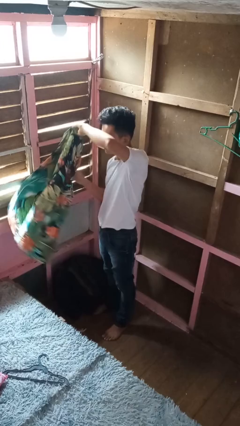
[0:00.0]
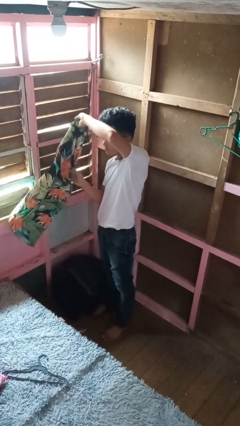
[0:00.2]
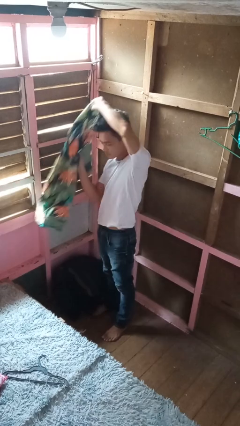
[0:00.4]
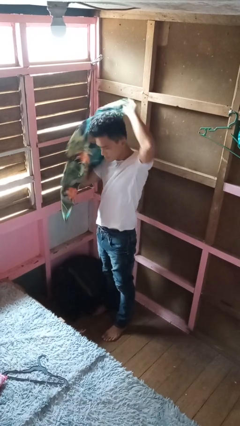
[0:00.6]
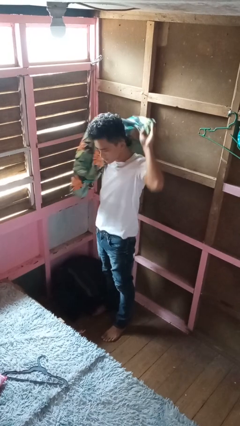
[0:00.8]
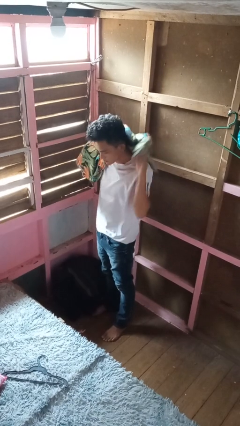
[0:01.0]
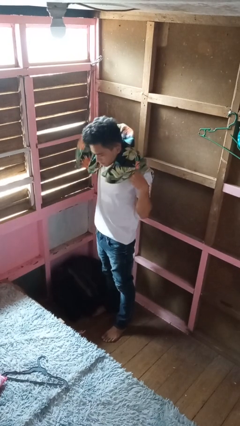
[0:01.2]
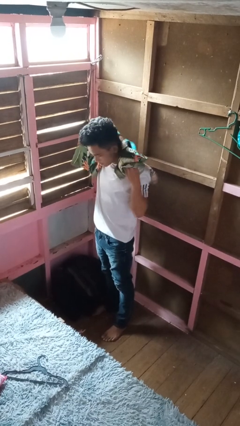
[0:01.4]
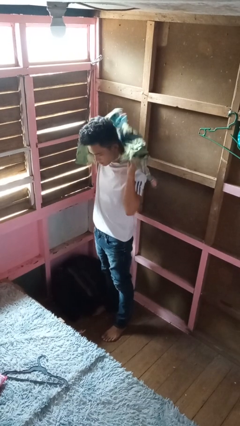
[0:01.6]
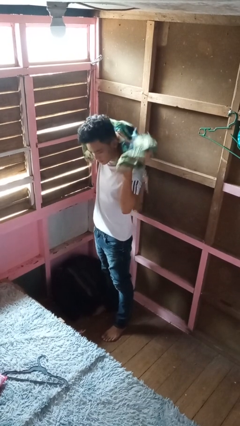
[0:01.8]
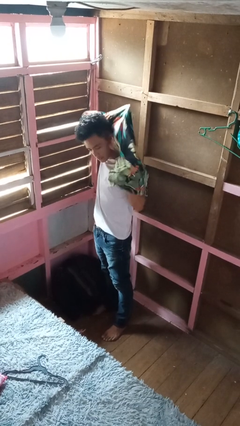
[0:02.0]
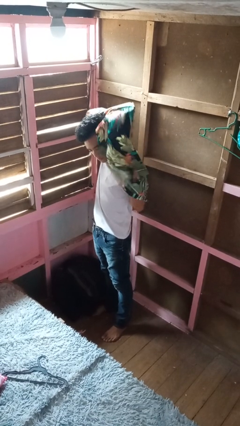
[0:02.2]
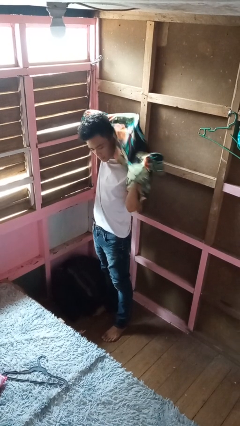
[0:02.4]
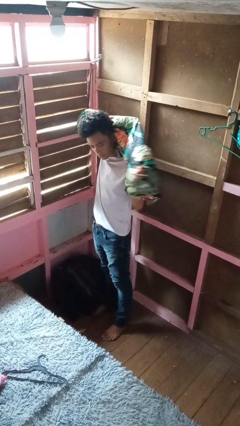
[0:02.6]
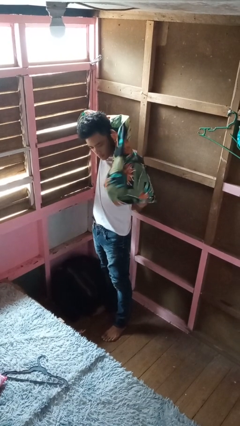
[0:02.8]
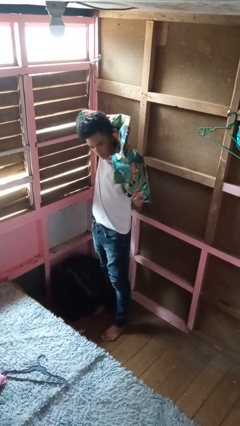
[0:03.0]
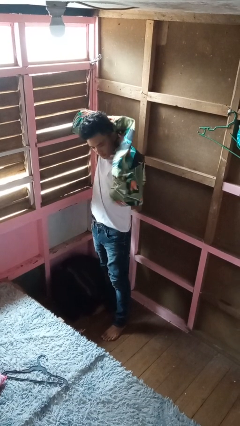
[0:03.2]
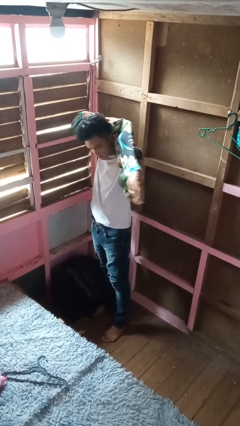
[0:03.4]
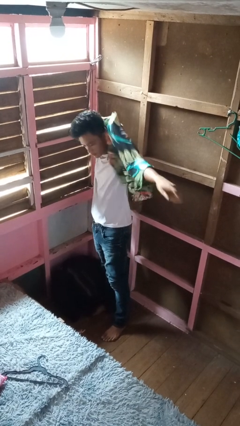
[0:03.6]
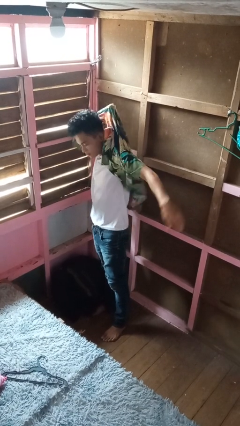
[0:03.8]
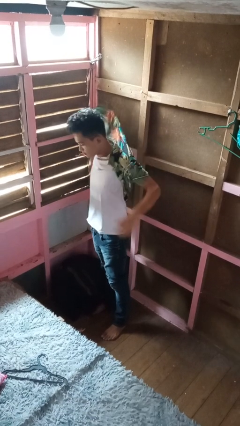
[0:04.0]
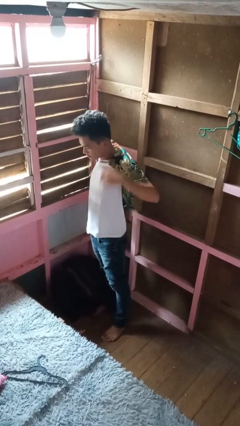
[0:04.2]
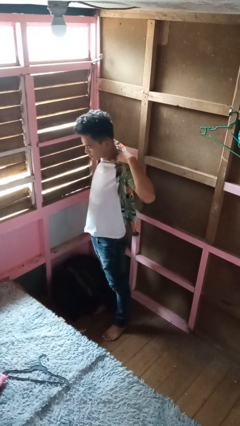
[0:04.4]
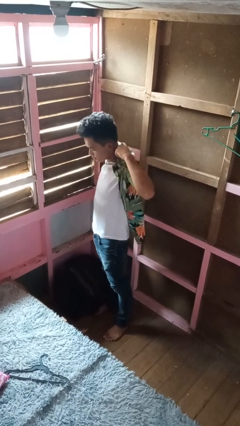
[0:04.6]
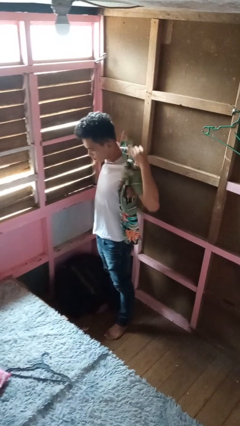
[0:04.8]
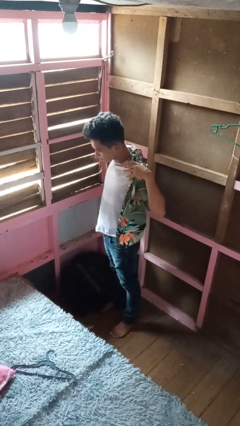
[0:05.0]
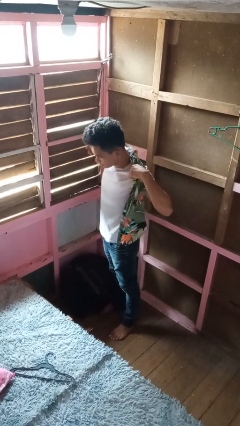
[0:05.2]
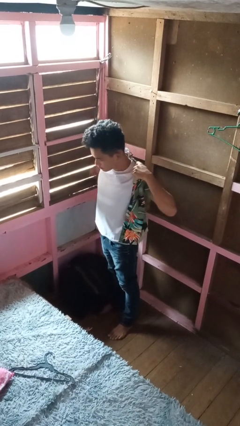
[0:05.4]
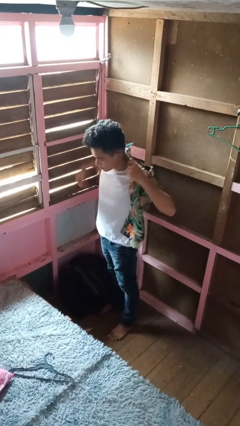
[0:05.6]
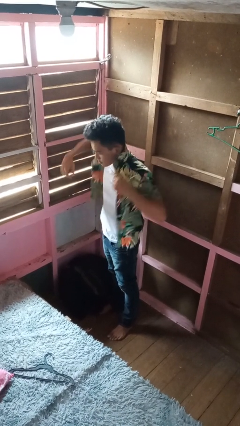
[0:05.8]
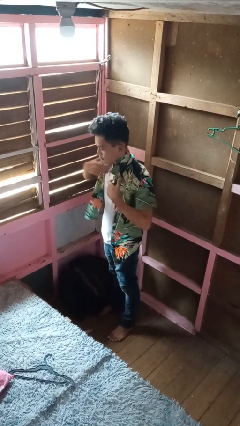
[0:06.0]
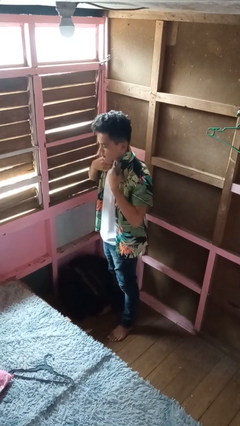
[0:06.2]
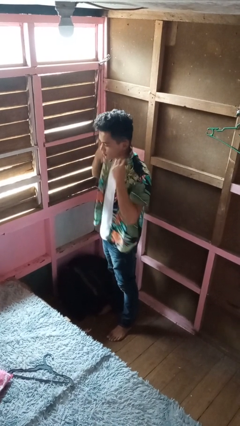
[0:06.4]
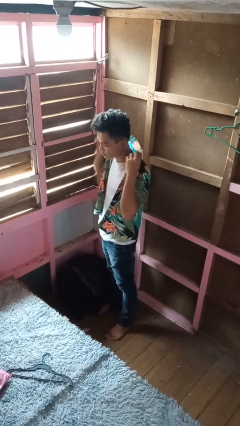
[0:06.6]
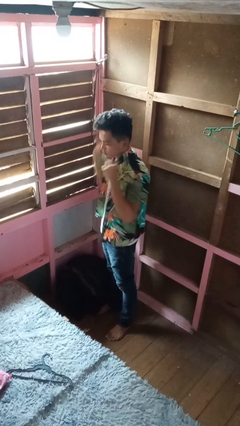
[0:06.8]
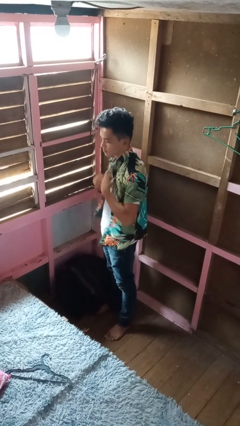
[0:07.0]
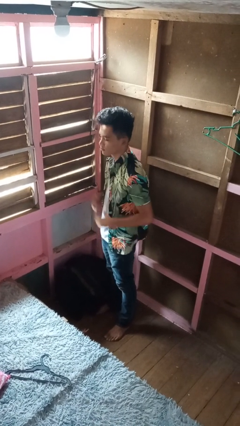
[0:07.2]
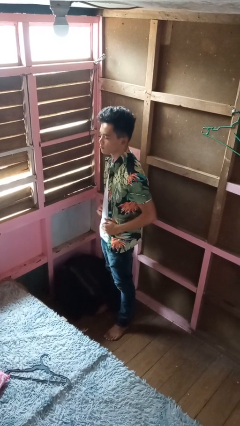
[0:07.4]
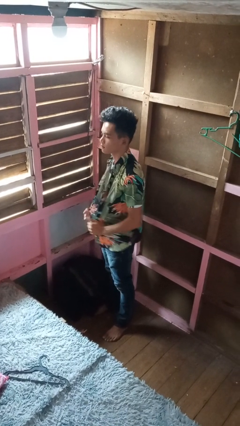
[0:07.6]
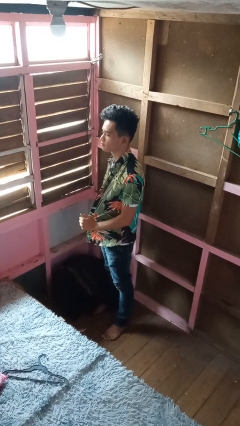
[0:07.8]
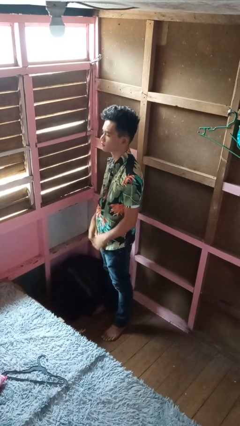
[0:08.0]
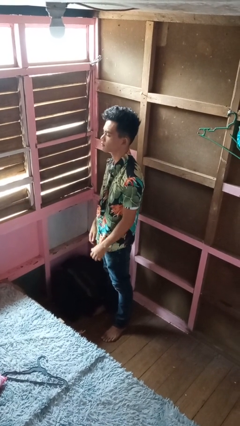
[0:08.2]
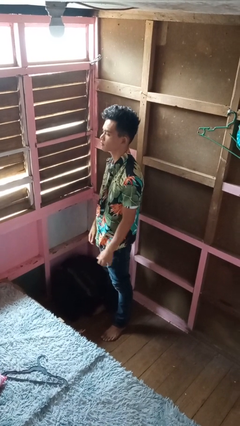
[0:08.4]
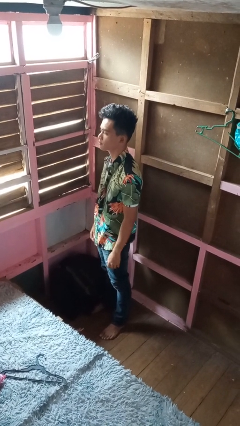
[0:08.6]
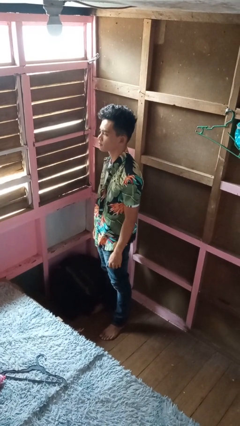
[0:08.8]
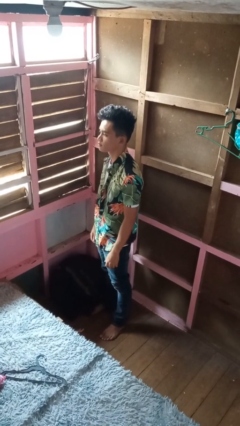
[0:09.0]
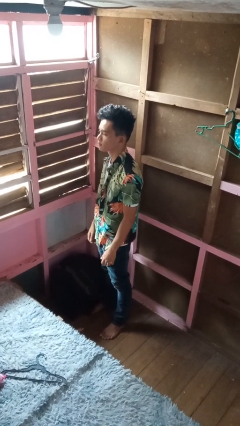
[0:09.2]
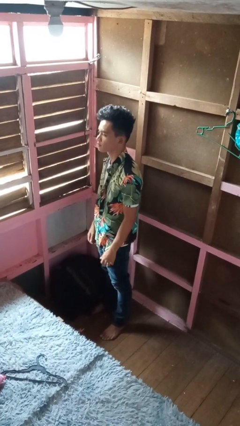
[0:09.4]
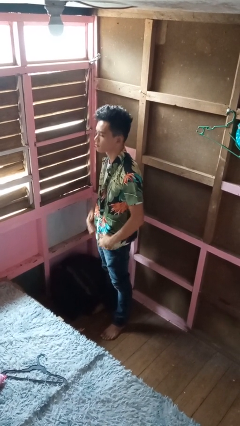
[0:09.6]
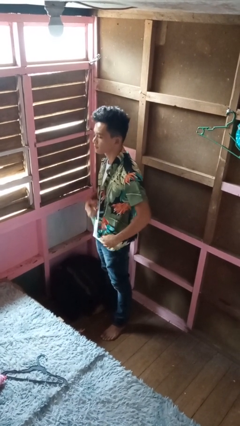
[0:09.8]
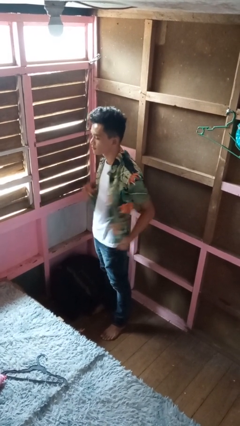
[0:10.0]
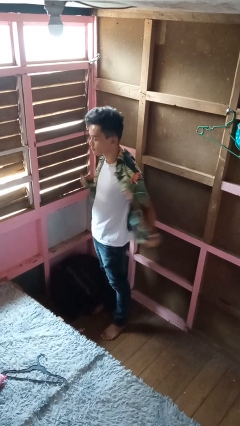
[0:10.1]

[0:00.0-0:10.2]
person puts on shirt

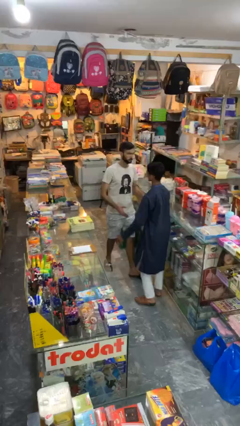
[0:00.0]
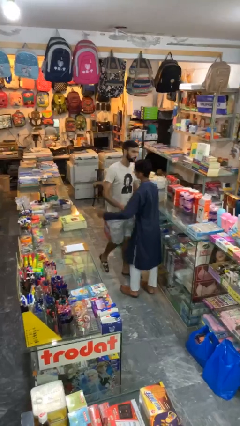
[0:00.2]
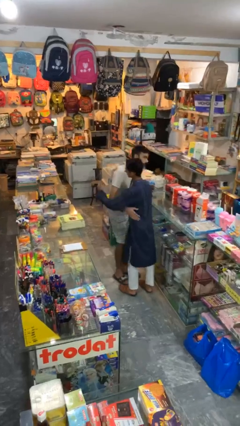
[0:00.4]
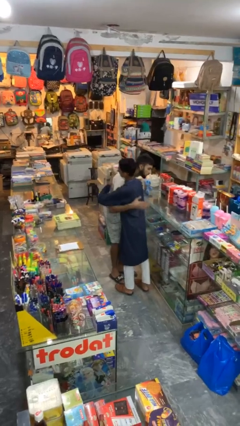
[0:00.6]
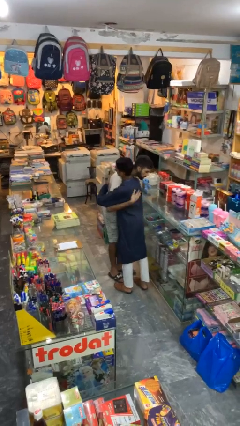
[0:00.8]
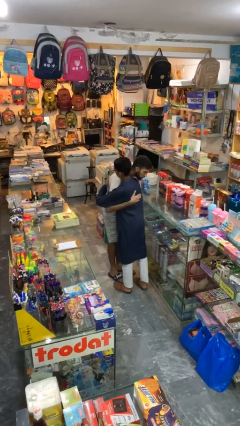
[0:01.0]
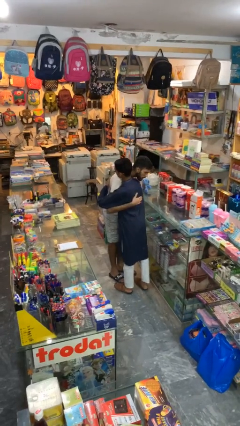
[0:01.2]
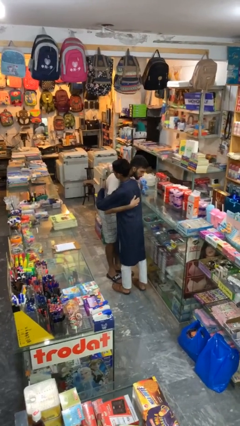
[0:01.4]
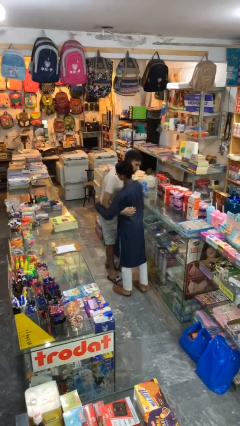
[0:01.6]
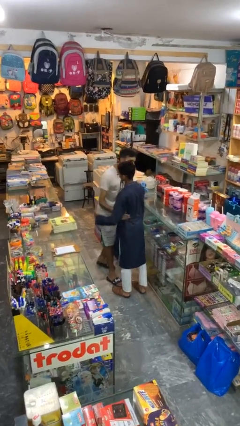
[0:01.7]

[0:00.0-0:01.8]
person embraces person

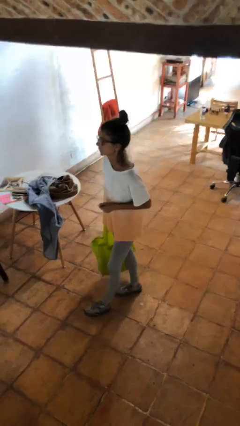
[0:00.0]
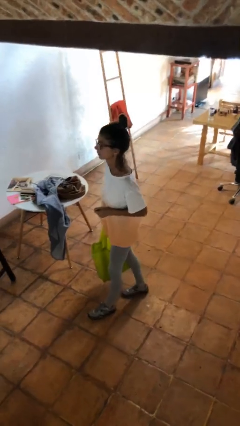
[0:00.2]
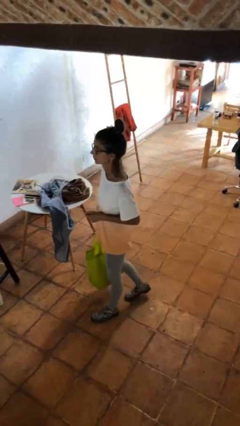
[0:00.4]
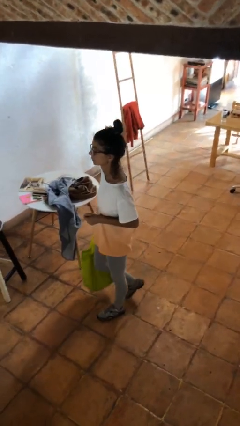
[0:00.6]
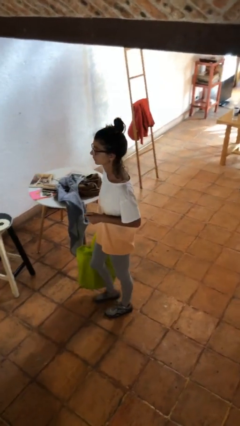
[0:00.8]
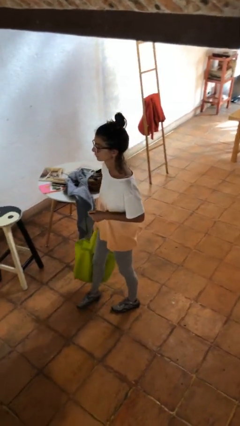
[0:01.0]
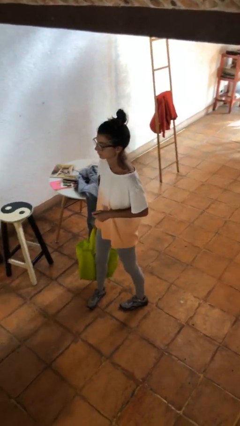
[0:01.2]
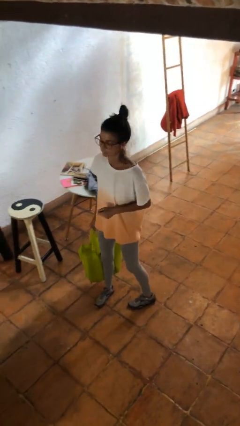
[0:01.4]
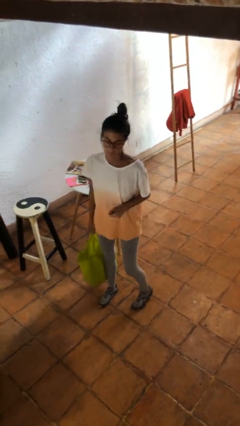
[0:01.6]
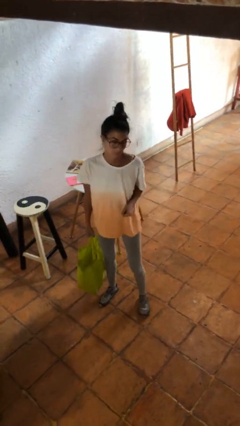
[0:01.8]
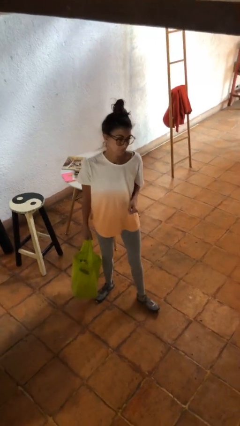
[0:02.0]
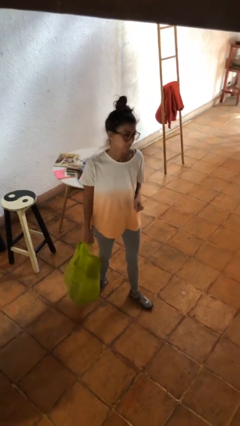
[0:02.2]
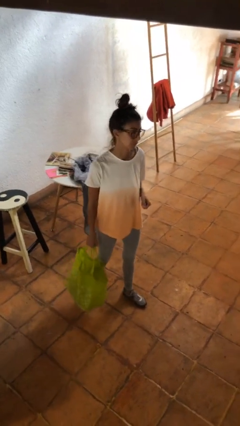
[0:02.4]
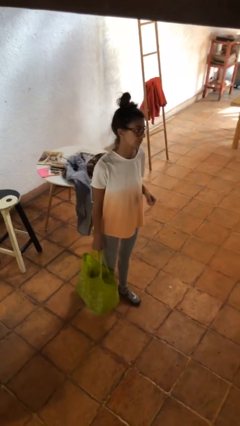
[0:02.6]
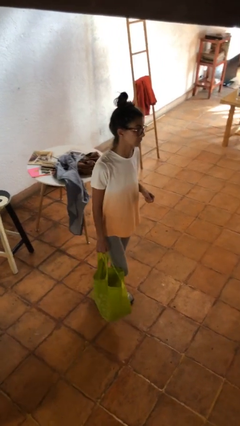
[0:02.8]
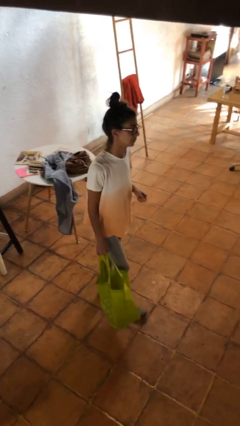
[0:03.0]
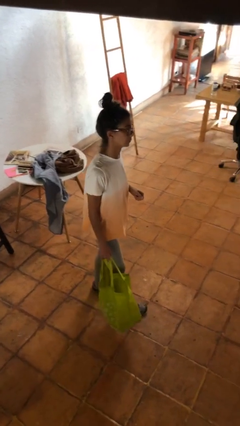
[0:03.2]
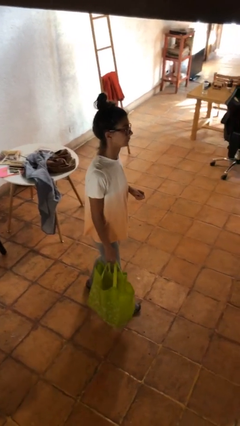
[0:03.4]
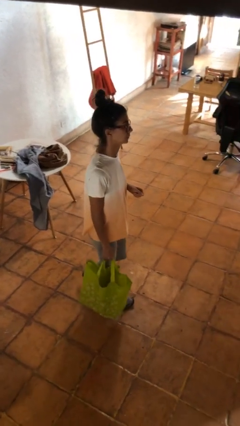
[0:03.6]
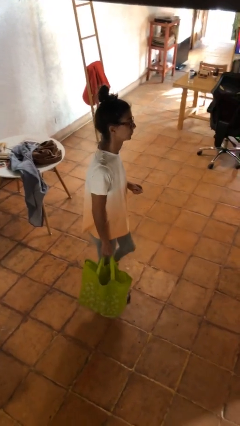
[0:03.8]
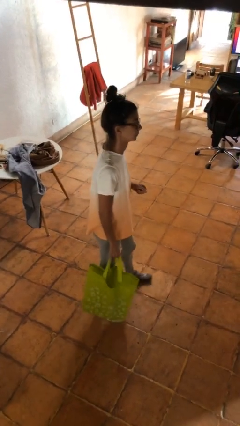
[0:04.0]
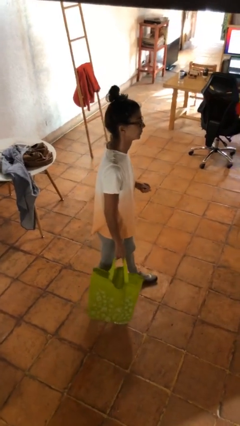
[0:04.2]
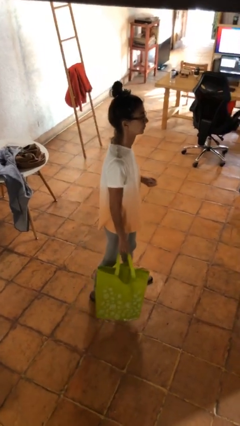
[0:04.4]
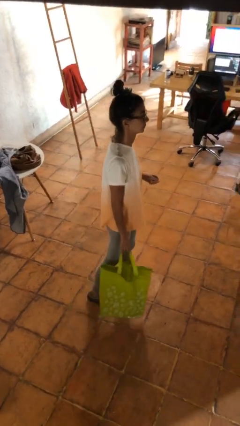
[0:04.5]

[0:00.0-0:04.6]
person carries groceries

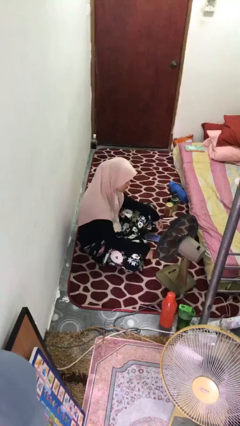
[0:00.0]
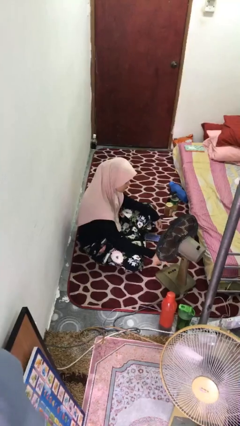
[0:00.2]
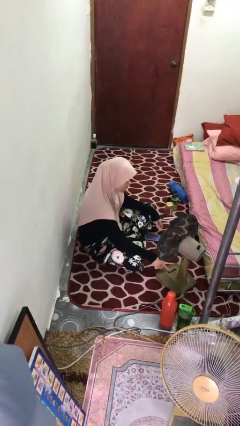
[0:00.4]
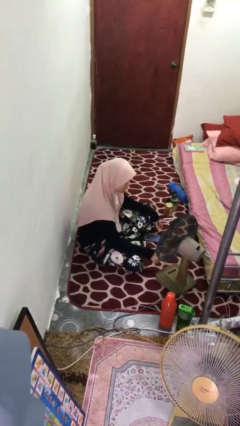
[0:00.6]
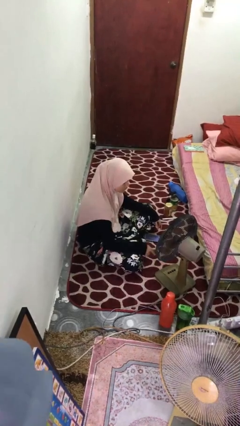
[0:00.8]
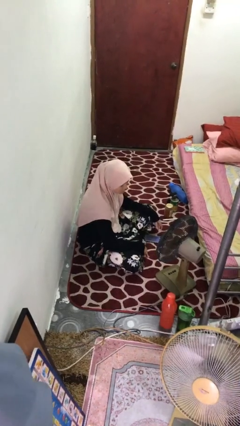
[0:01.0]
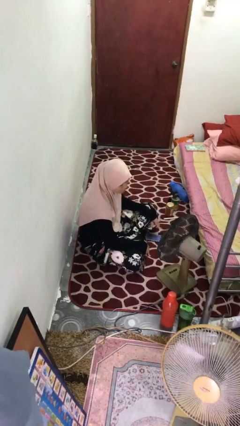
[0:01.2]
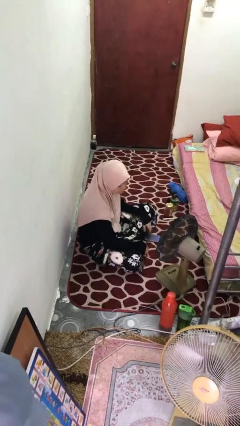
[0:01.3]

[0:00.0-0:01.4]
person turns on fan
